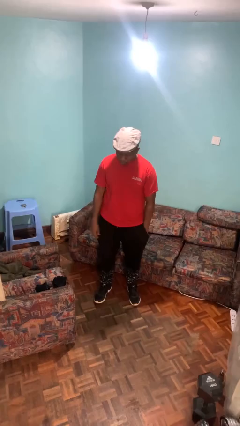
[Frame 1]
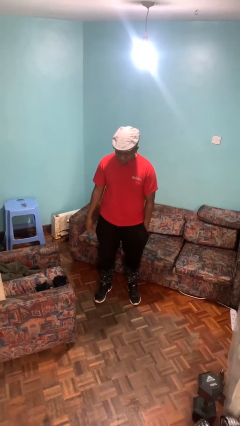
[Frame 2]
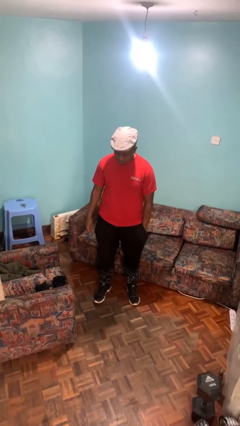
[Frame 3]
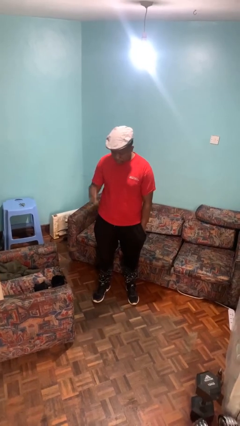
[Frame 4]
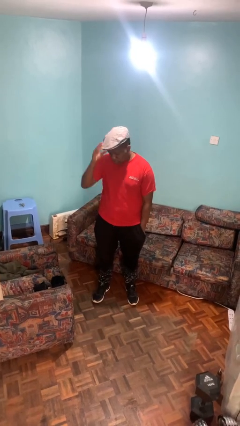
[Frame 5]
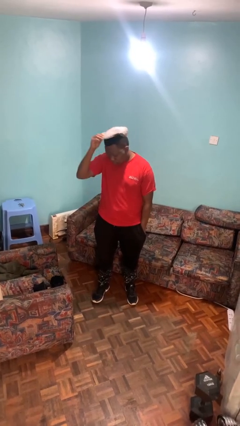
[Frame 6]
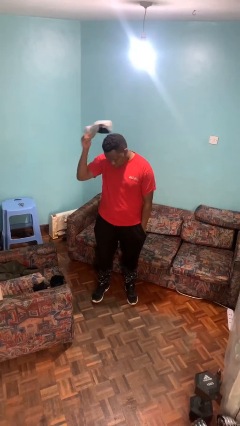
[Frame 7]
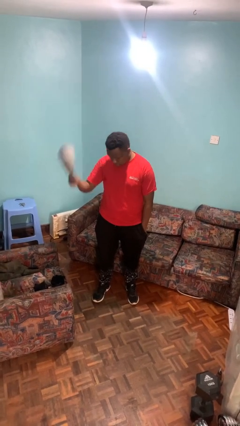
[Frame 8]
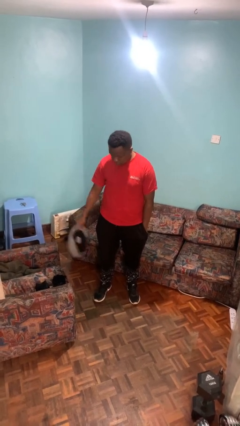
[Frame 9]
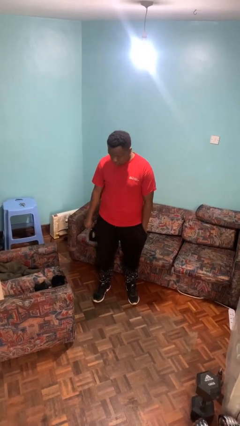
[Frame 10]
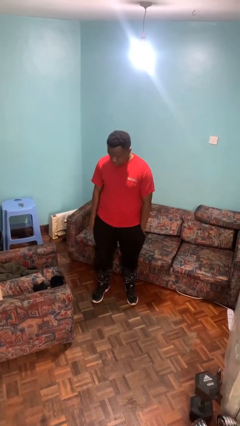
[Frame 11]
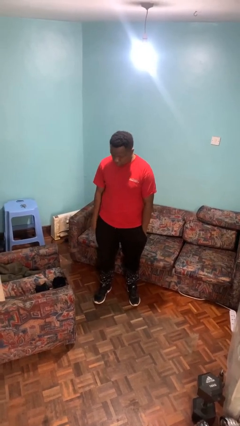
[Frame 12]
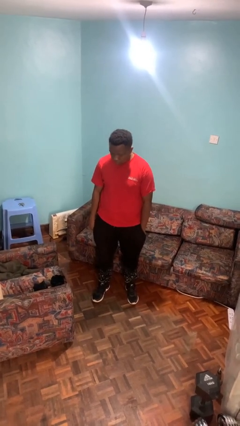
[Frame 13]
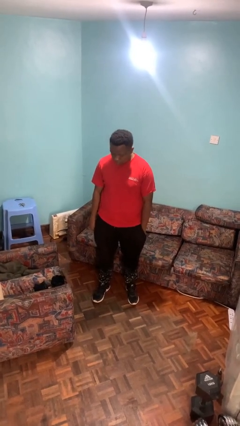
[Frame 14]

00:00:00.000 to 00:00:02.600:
person takes off hat

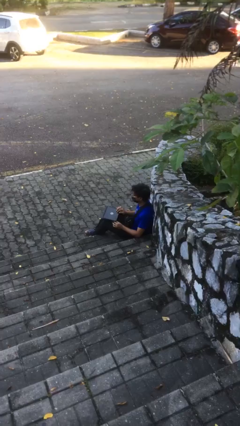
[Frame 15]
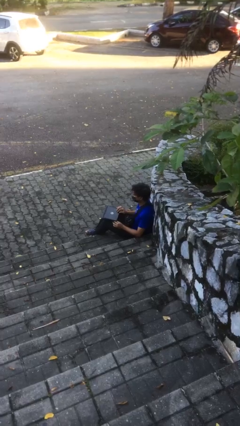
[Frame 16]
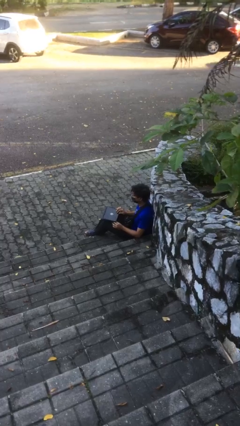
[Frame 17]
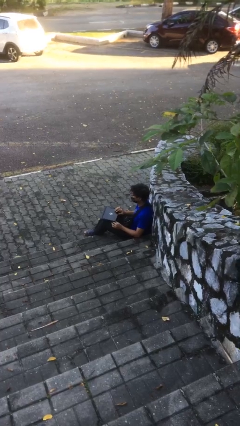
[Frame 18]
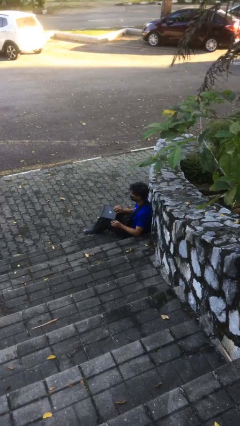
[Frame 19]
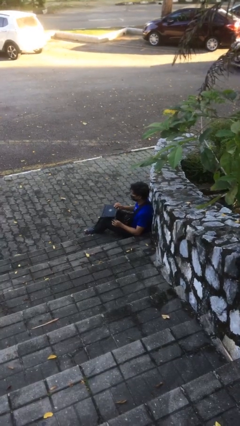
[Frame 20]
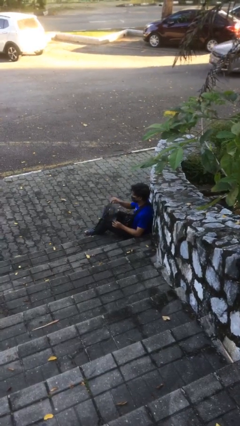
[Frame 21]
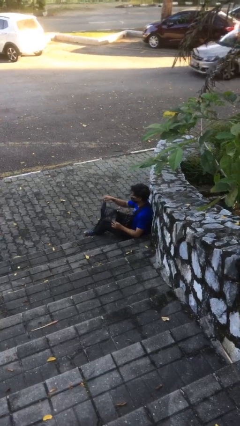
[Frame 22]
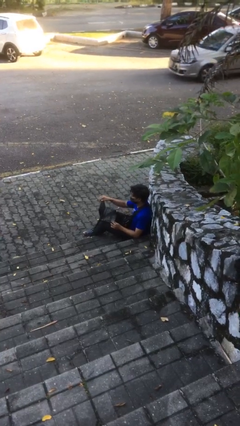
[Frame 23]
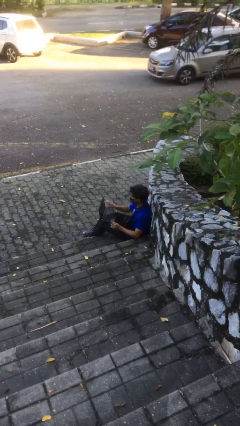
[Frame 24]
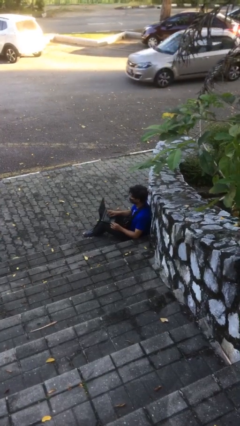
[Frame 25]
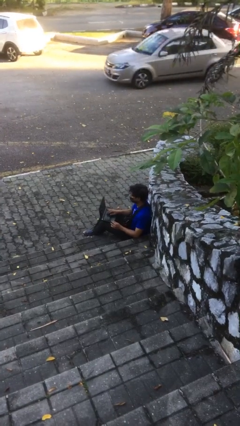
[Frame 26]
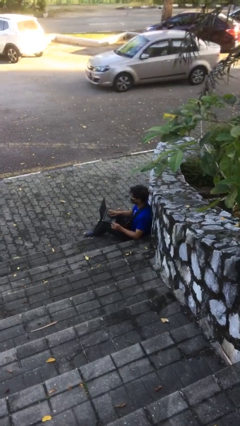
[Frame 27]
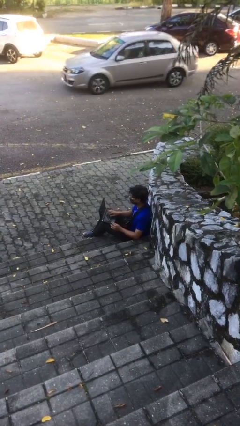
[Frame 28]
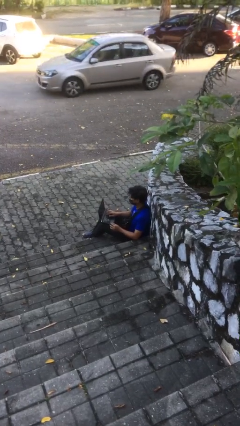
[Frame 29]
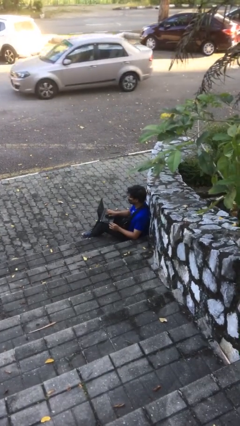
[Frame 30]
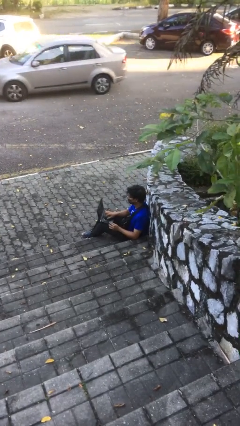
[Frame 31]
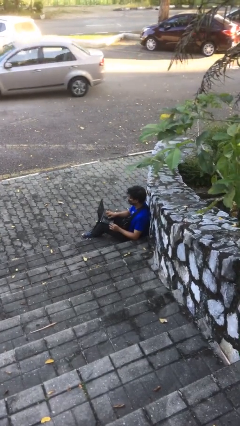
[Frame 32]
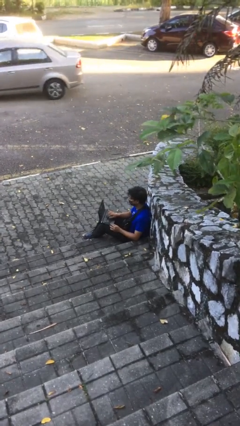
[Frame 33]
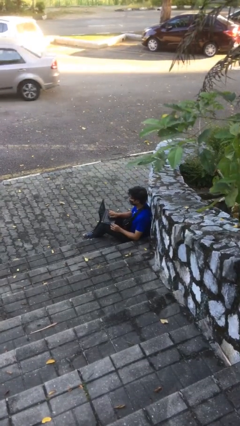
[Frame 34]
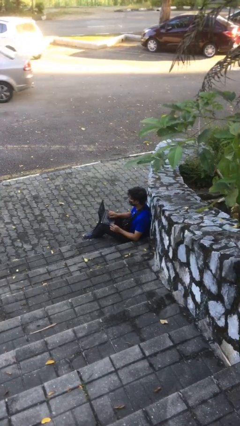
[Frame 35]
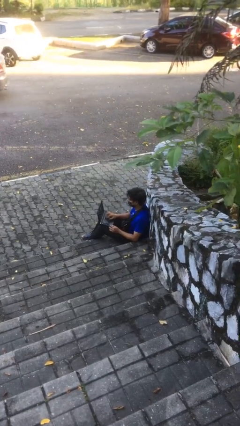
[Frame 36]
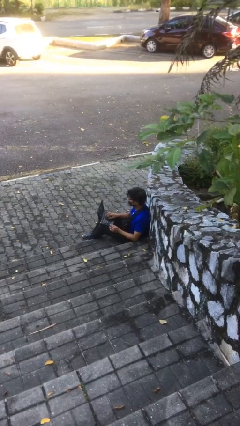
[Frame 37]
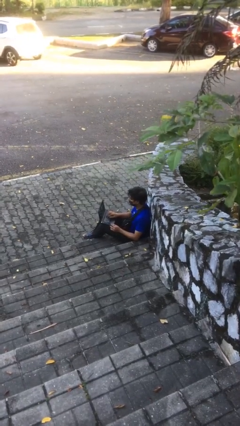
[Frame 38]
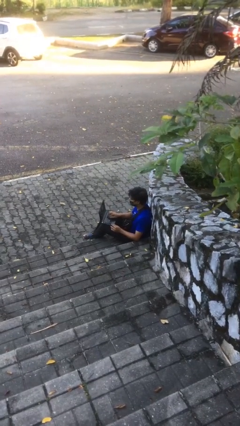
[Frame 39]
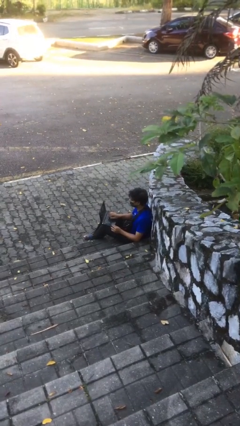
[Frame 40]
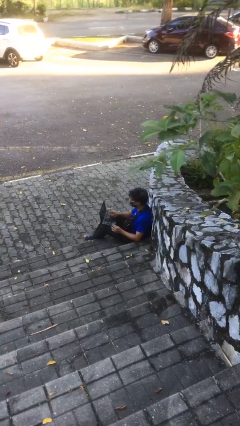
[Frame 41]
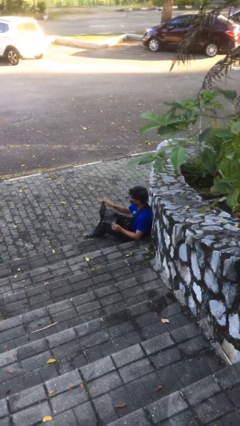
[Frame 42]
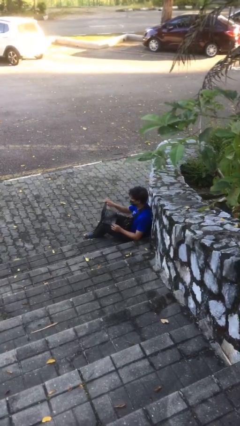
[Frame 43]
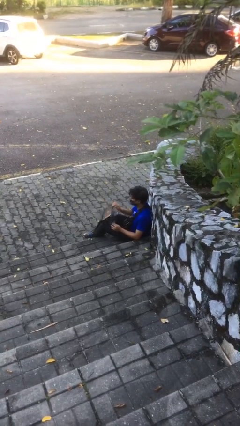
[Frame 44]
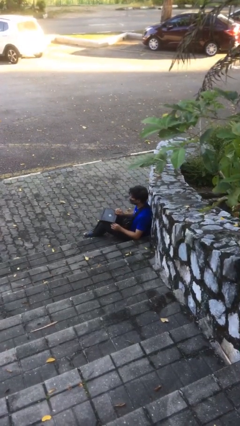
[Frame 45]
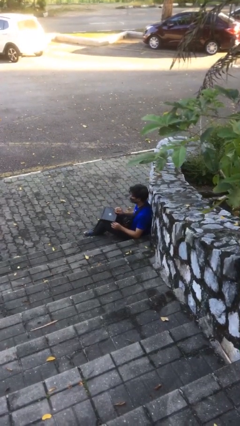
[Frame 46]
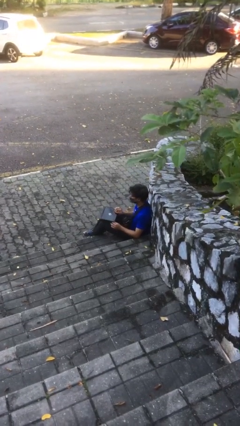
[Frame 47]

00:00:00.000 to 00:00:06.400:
person interacts with laptop

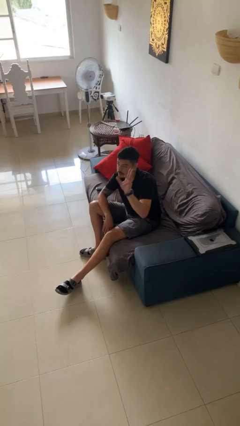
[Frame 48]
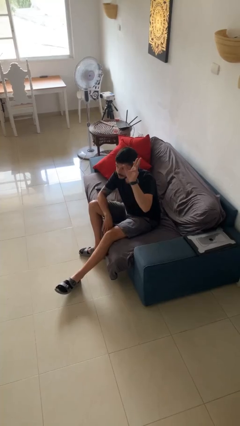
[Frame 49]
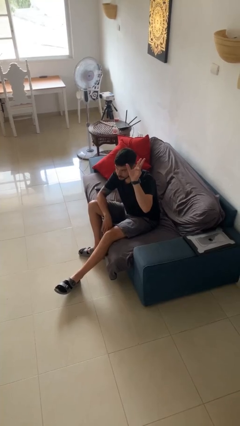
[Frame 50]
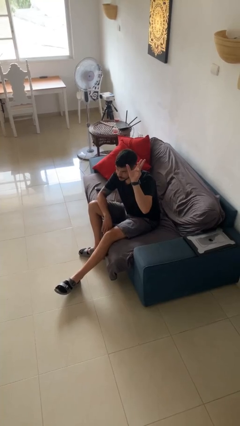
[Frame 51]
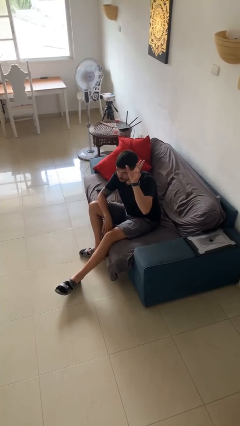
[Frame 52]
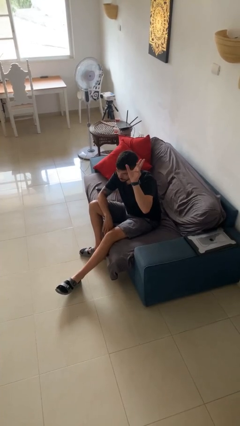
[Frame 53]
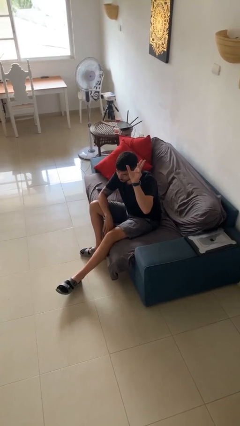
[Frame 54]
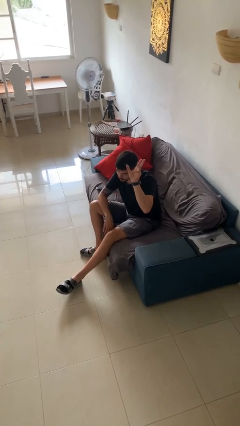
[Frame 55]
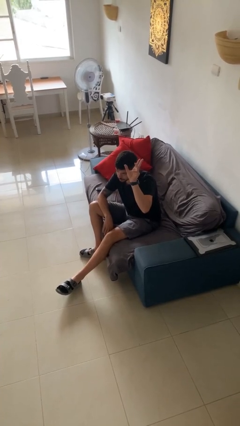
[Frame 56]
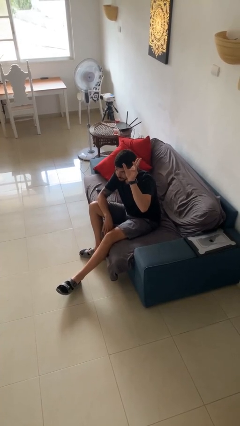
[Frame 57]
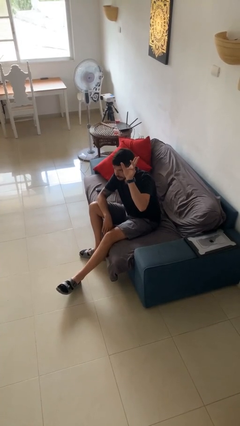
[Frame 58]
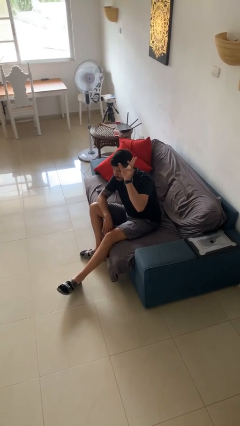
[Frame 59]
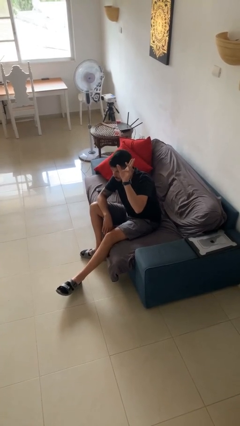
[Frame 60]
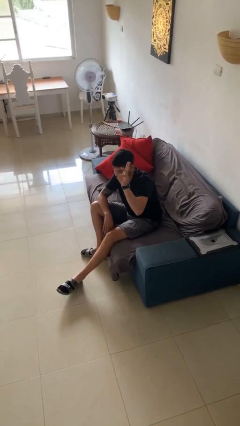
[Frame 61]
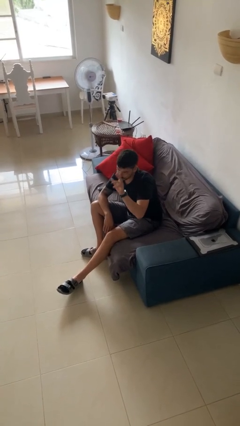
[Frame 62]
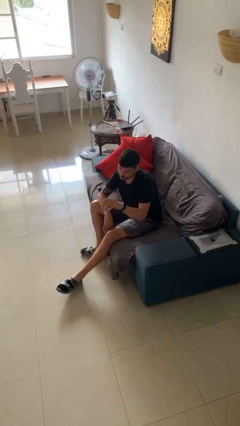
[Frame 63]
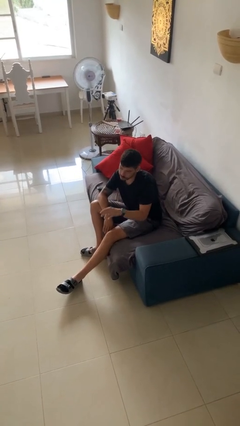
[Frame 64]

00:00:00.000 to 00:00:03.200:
person gestures raise hand

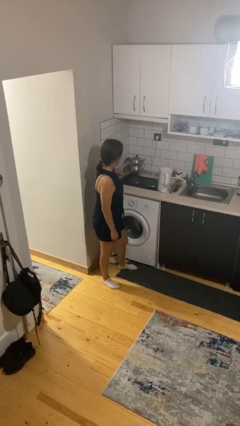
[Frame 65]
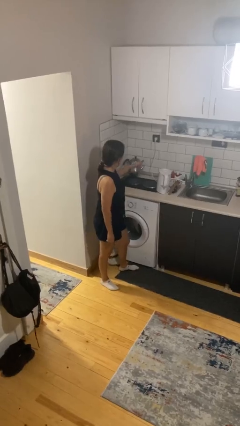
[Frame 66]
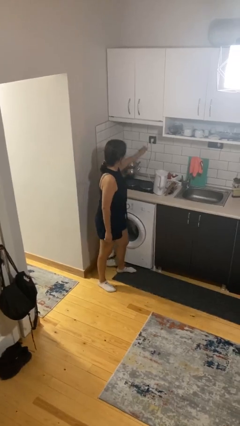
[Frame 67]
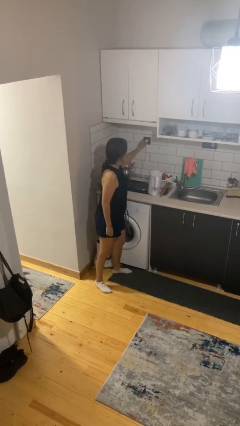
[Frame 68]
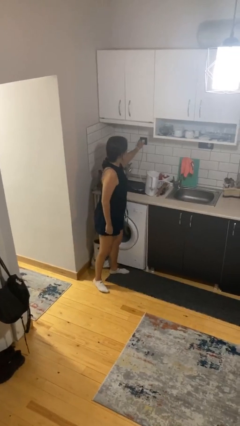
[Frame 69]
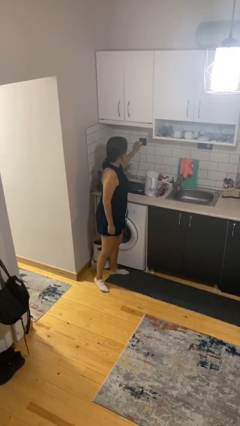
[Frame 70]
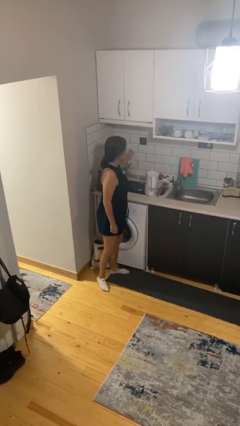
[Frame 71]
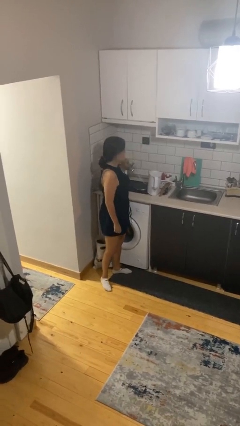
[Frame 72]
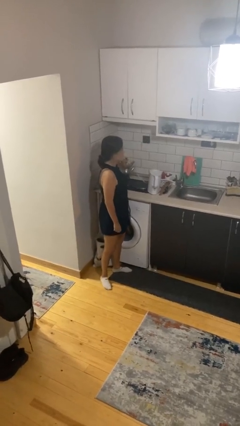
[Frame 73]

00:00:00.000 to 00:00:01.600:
person unplugs from electrical socket

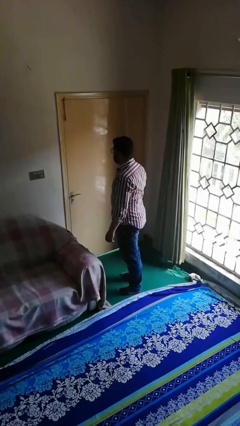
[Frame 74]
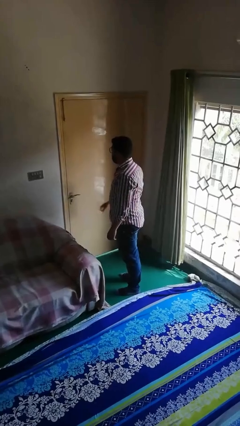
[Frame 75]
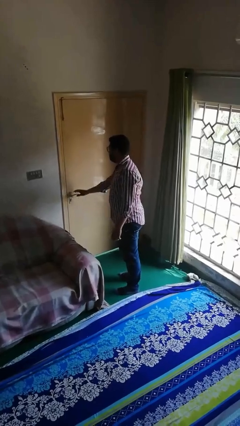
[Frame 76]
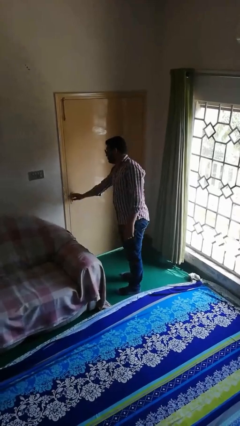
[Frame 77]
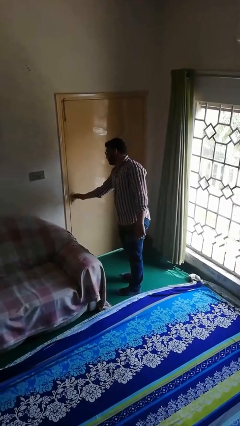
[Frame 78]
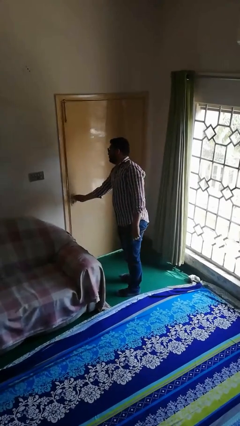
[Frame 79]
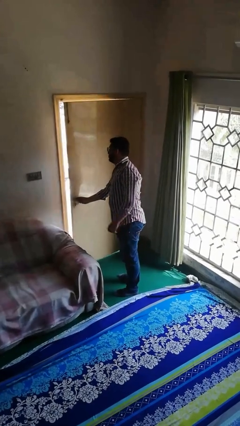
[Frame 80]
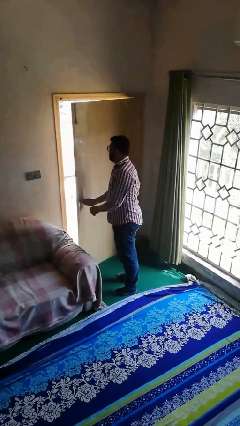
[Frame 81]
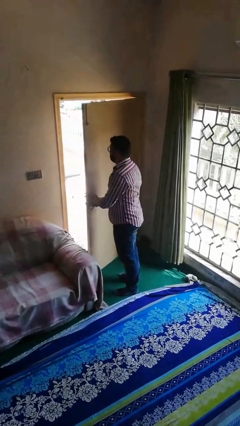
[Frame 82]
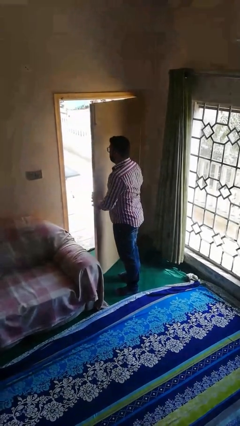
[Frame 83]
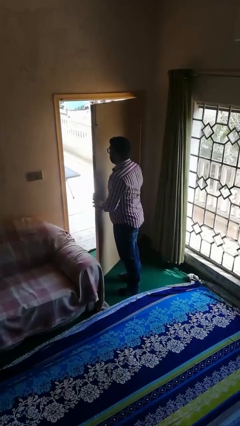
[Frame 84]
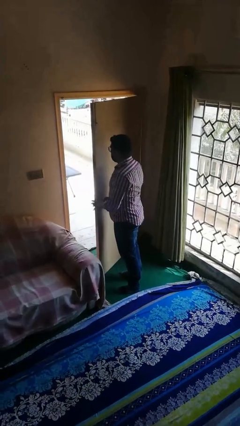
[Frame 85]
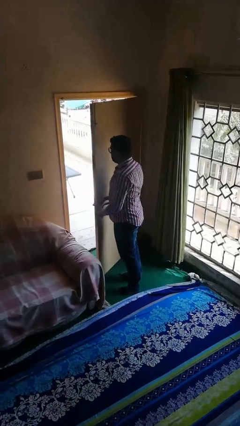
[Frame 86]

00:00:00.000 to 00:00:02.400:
person opens facility door

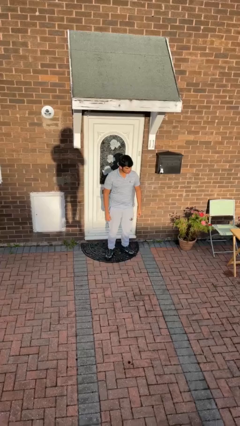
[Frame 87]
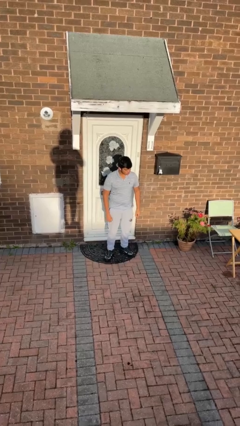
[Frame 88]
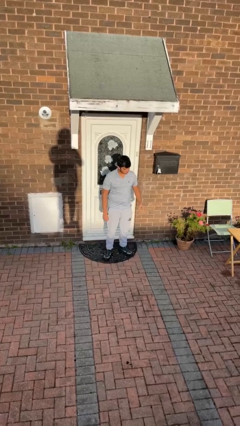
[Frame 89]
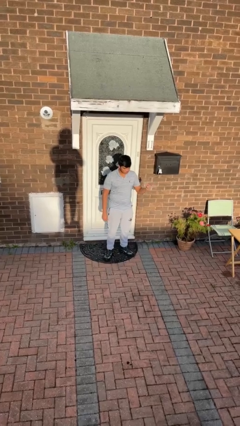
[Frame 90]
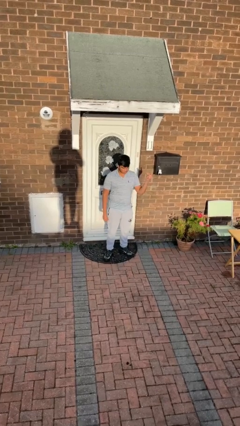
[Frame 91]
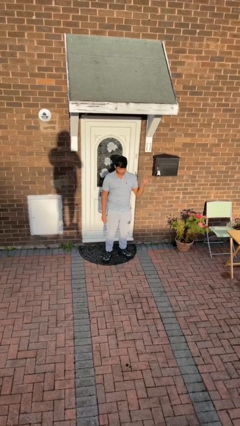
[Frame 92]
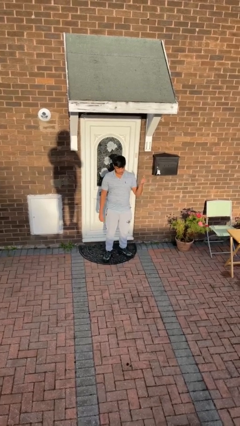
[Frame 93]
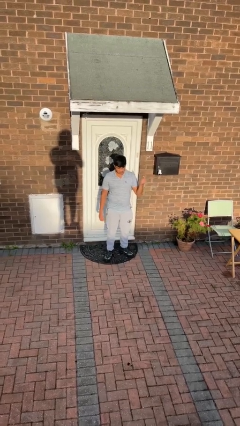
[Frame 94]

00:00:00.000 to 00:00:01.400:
person snaps fingers
